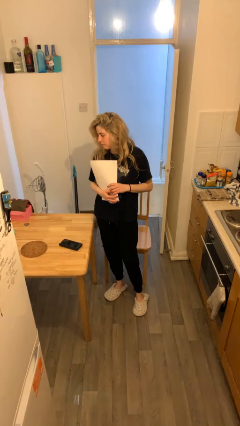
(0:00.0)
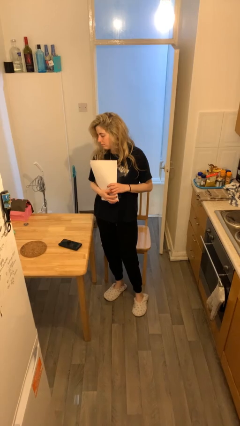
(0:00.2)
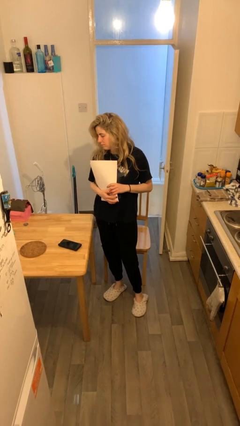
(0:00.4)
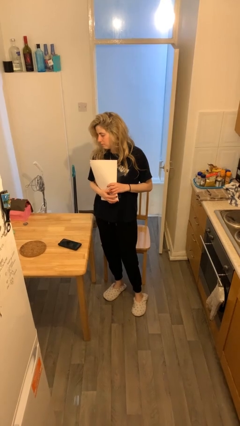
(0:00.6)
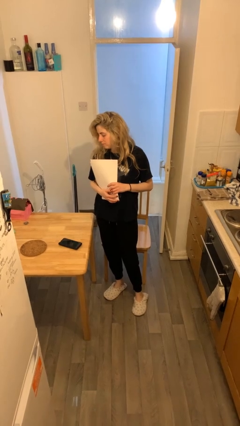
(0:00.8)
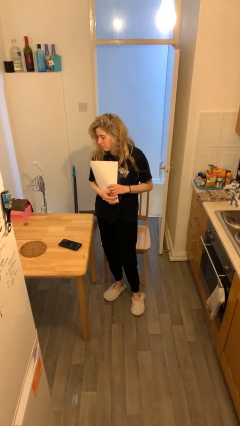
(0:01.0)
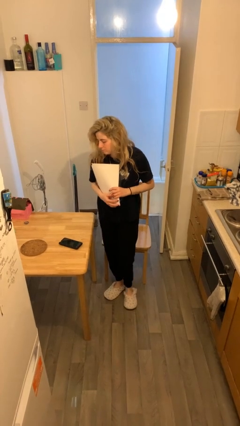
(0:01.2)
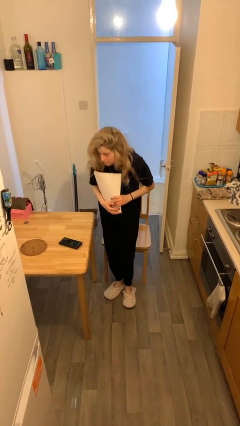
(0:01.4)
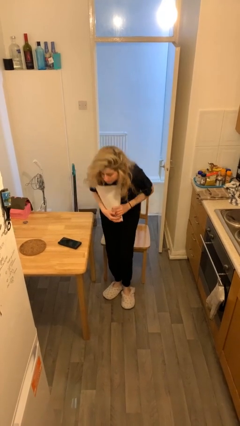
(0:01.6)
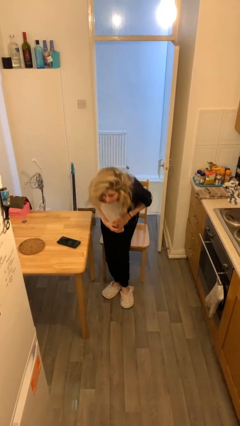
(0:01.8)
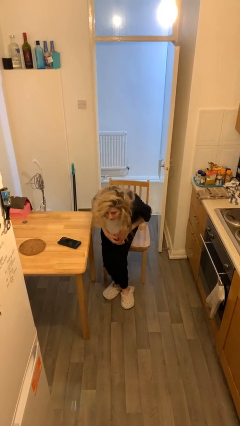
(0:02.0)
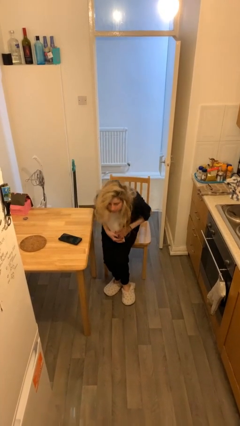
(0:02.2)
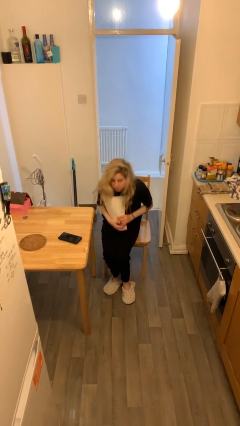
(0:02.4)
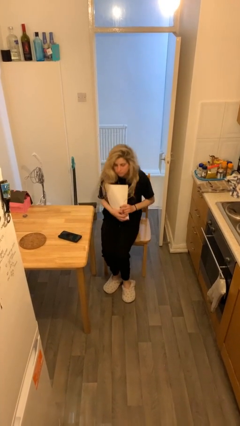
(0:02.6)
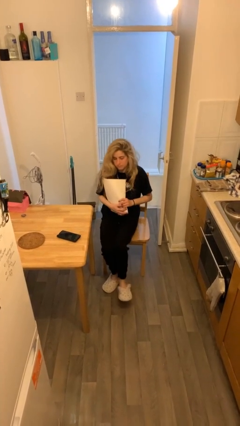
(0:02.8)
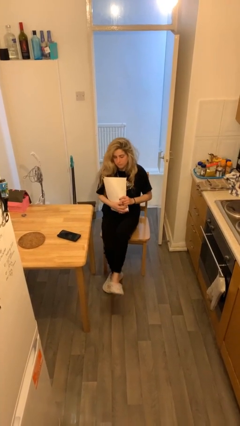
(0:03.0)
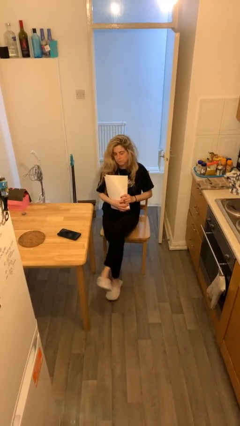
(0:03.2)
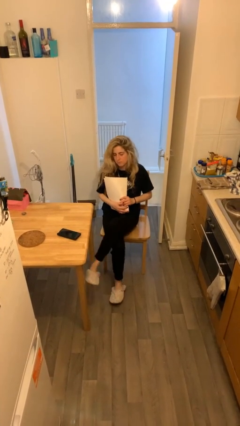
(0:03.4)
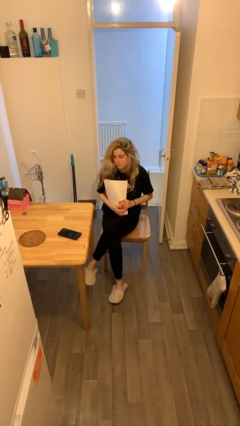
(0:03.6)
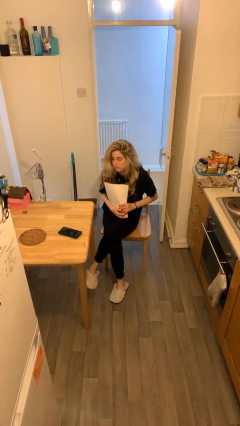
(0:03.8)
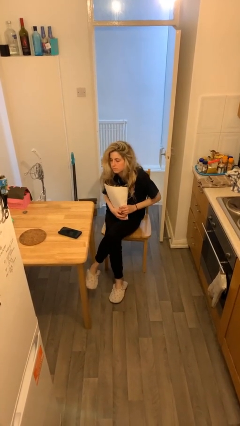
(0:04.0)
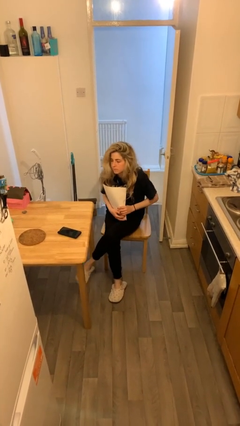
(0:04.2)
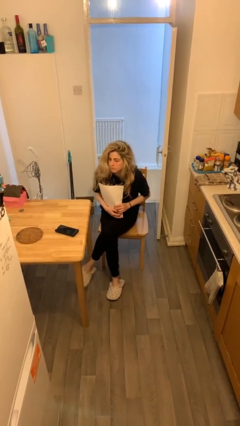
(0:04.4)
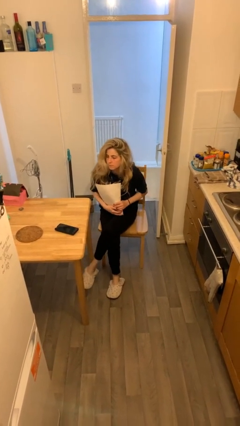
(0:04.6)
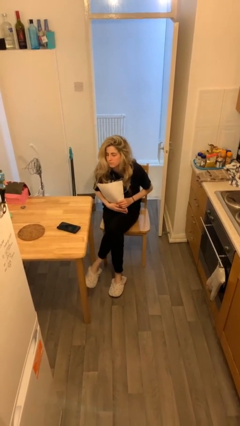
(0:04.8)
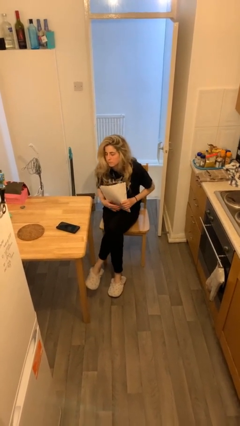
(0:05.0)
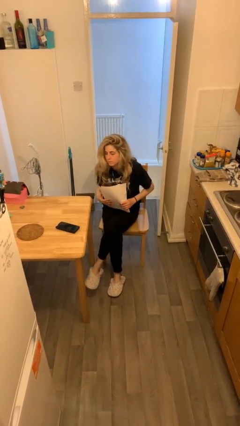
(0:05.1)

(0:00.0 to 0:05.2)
person sits down

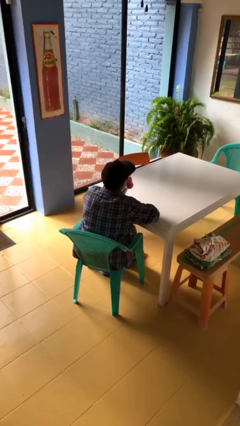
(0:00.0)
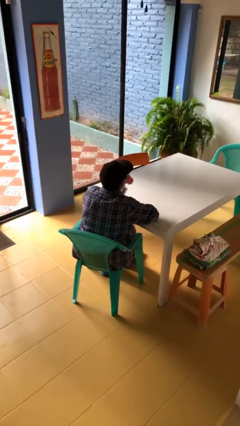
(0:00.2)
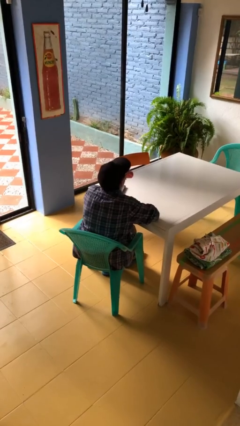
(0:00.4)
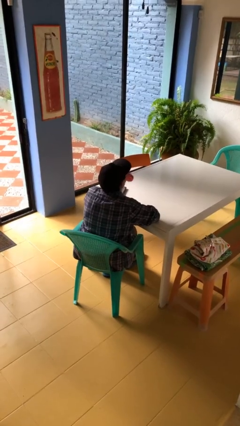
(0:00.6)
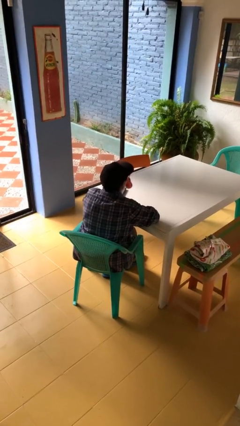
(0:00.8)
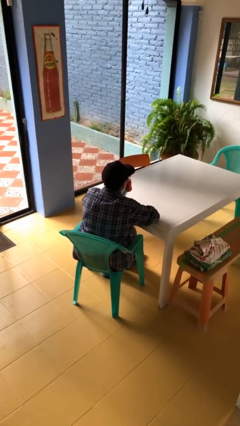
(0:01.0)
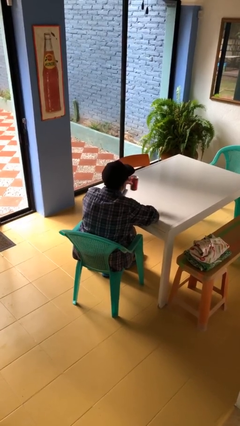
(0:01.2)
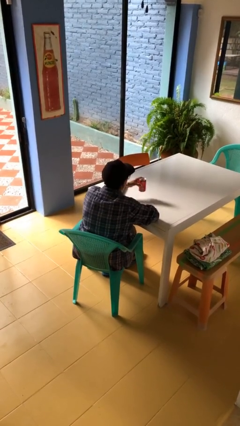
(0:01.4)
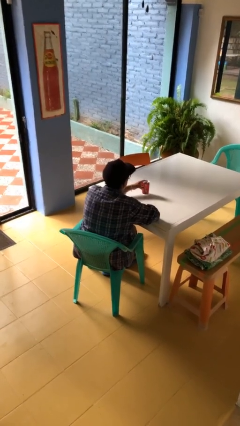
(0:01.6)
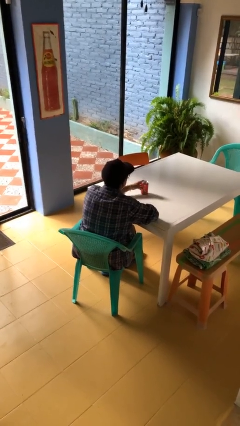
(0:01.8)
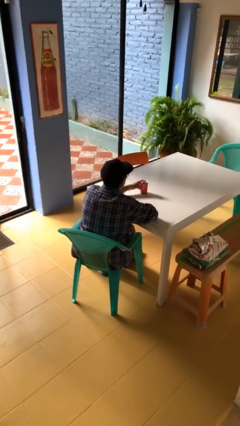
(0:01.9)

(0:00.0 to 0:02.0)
person drinks from beverage can

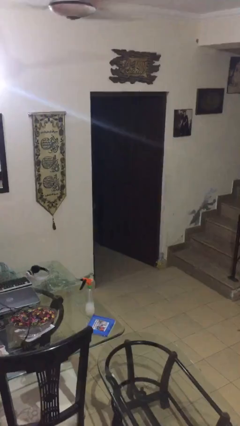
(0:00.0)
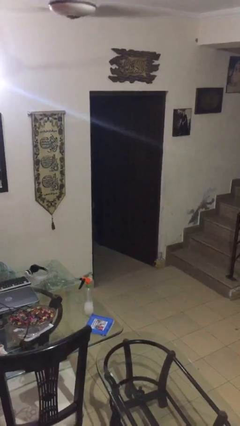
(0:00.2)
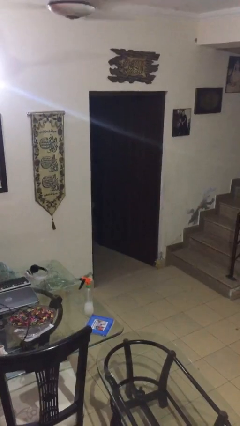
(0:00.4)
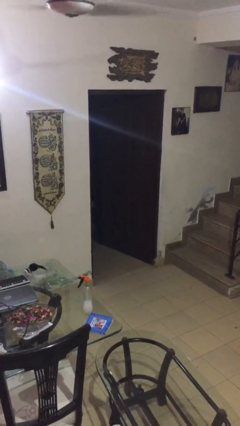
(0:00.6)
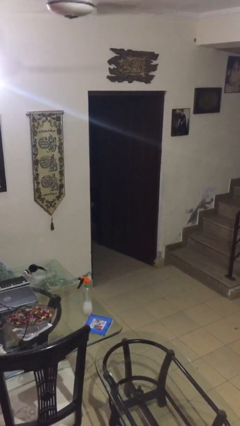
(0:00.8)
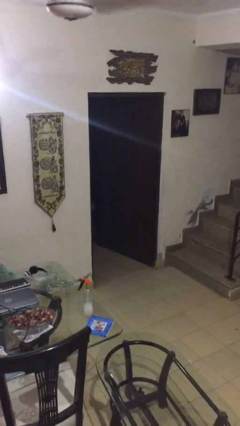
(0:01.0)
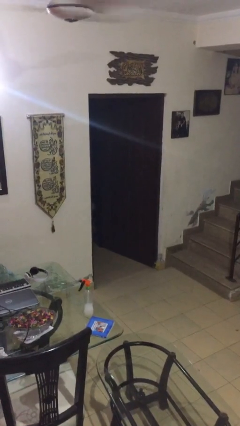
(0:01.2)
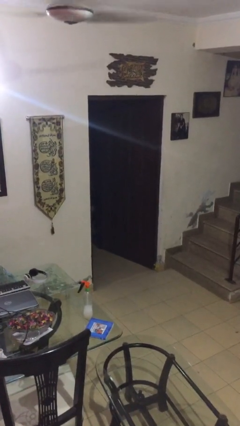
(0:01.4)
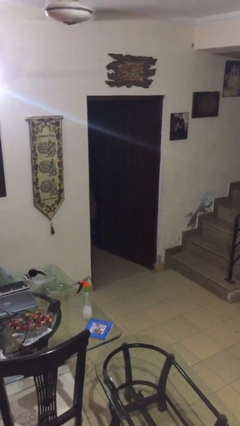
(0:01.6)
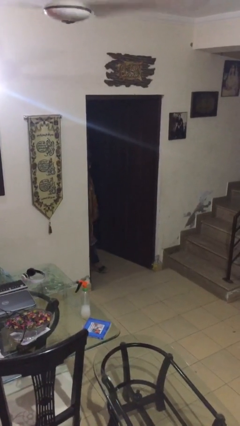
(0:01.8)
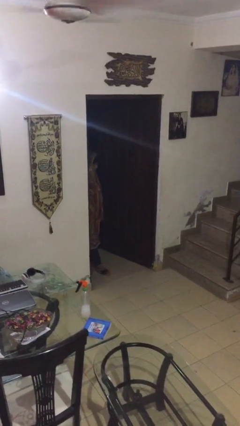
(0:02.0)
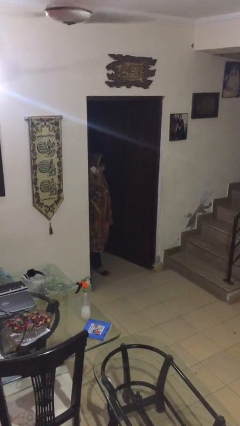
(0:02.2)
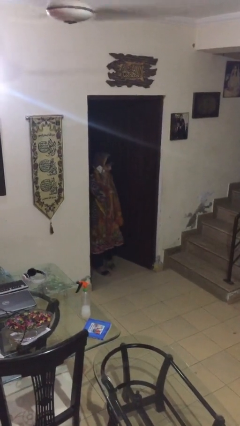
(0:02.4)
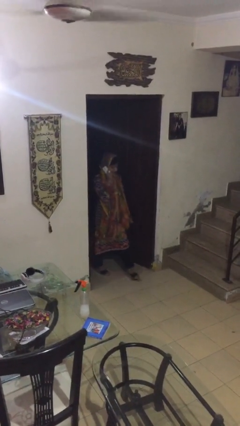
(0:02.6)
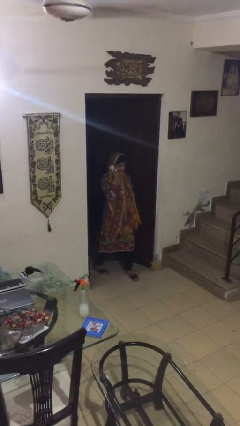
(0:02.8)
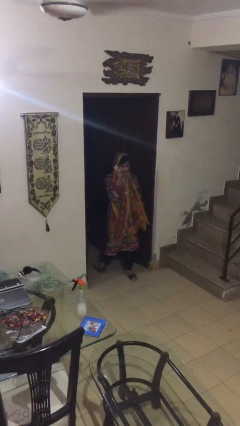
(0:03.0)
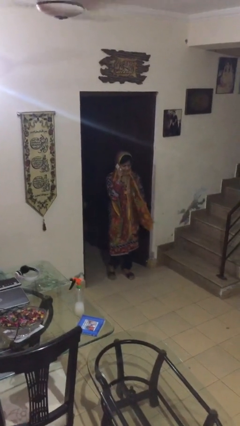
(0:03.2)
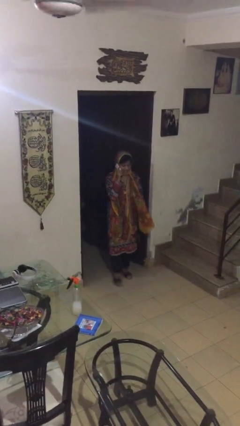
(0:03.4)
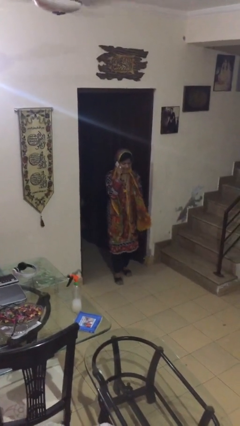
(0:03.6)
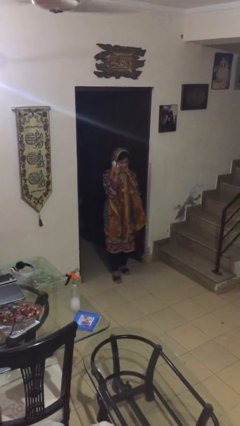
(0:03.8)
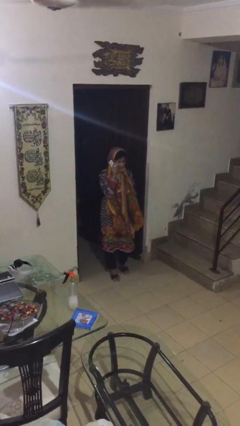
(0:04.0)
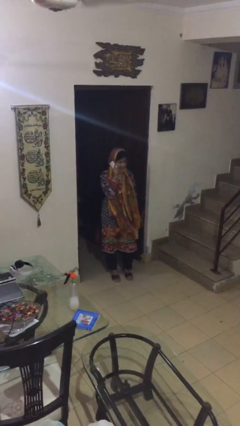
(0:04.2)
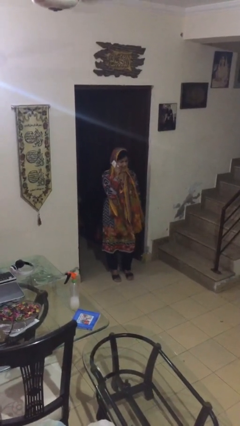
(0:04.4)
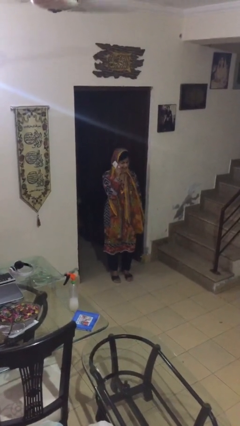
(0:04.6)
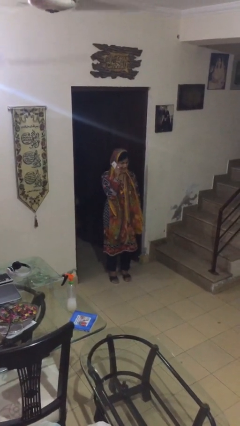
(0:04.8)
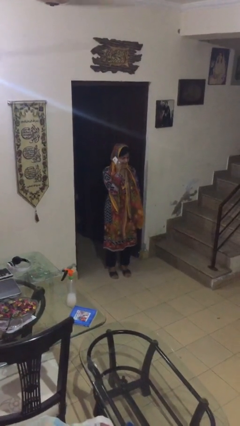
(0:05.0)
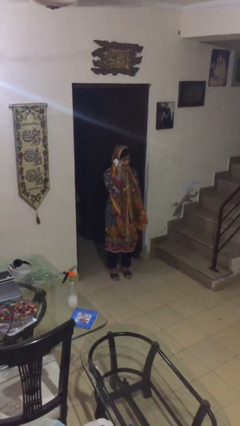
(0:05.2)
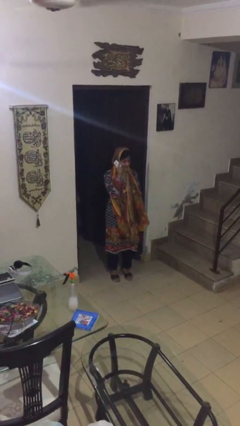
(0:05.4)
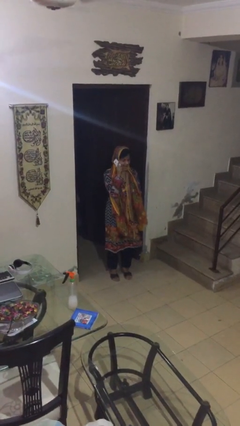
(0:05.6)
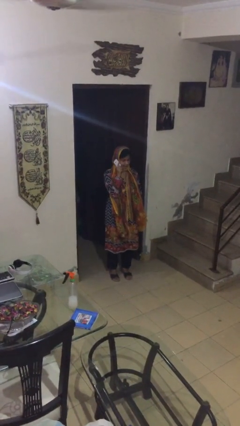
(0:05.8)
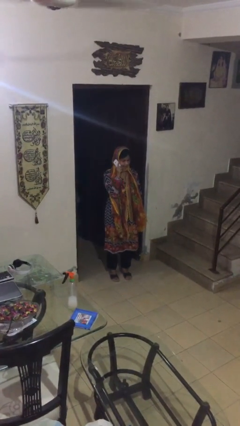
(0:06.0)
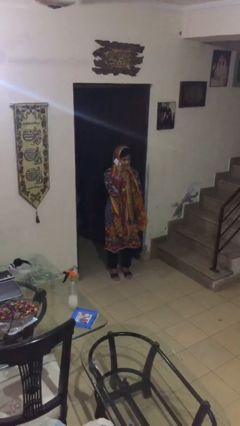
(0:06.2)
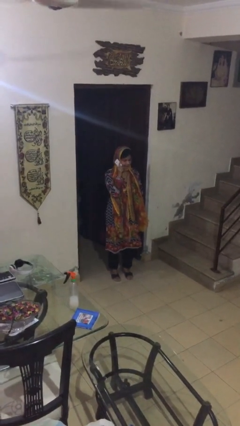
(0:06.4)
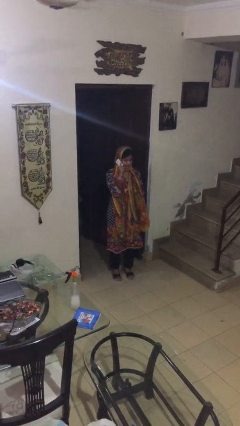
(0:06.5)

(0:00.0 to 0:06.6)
person enters scene through structure

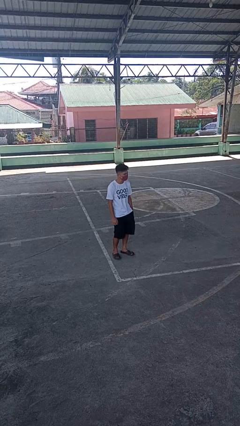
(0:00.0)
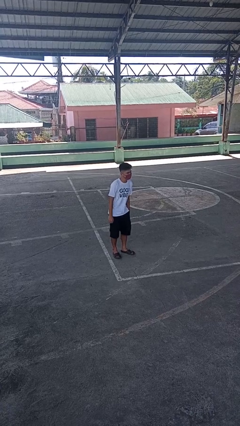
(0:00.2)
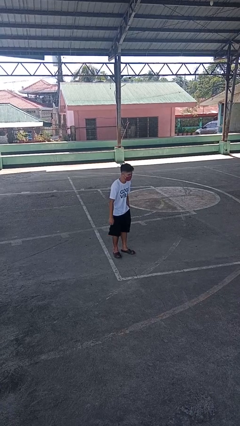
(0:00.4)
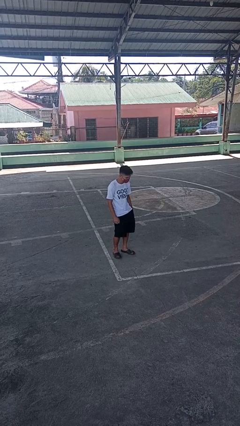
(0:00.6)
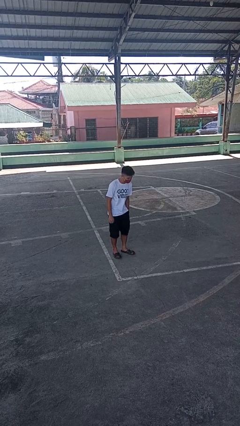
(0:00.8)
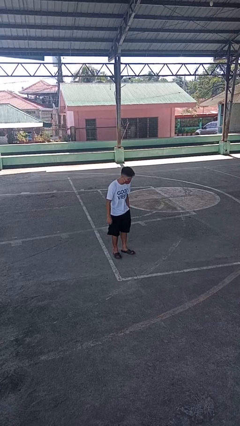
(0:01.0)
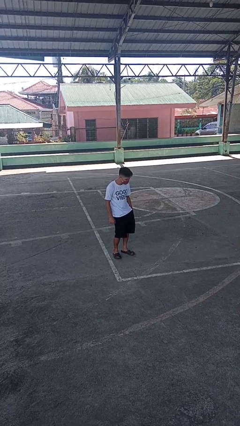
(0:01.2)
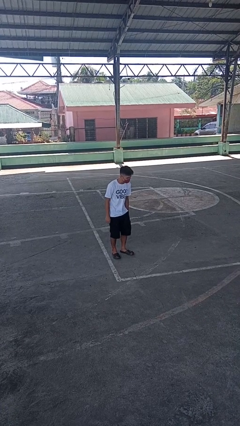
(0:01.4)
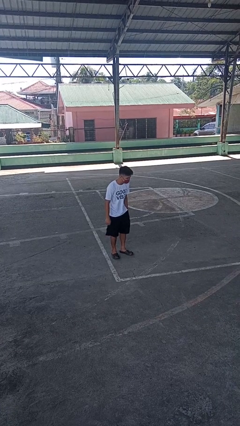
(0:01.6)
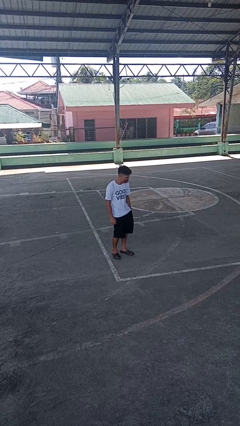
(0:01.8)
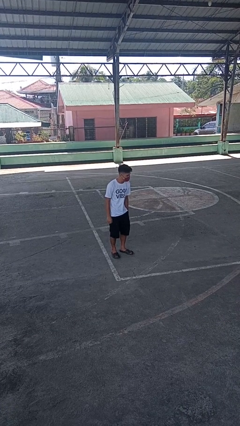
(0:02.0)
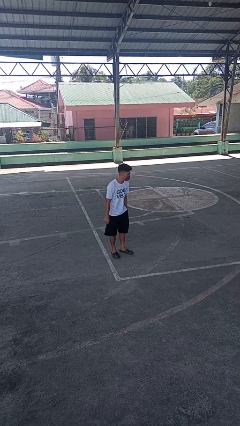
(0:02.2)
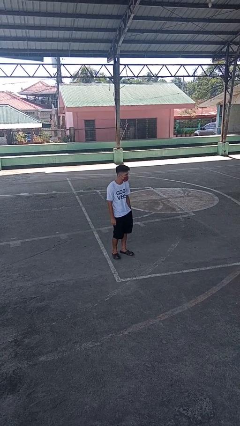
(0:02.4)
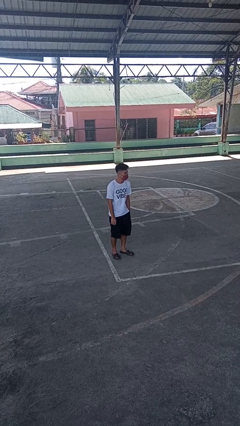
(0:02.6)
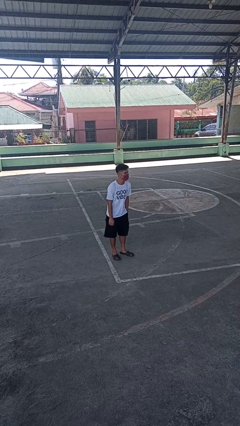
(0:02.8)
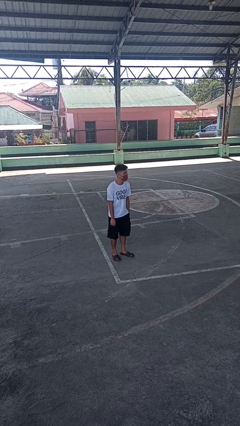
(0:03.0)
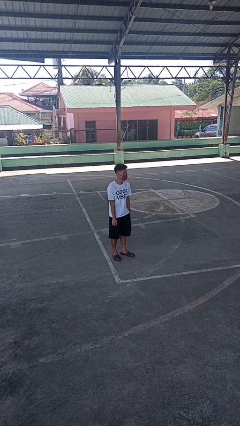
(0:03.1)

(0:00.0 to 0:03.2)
person wiggles hips

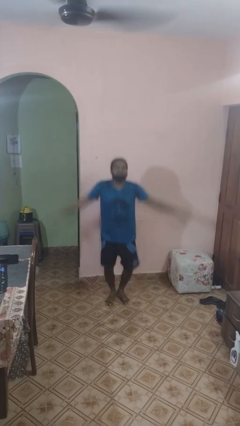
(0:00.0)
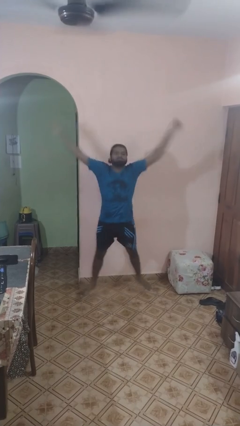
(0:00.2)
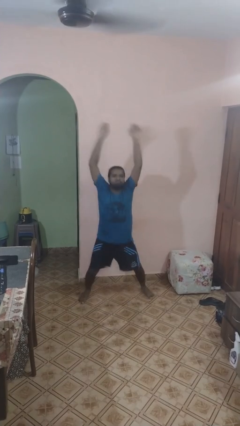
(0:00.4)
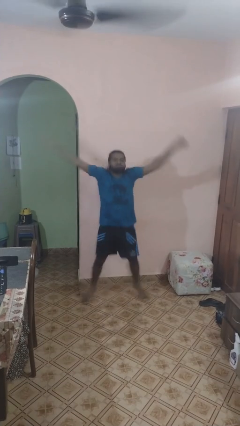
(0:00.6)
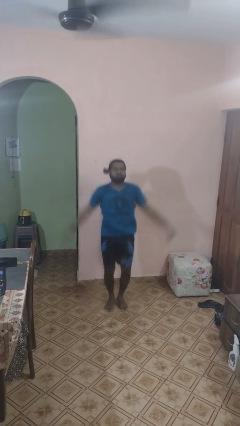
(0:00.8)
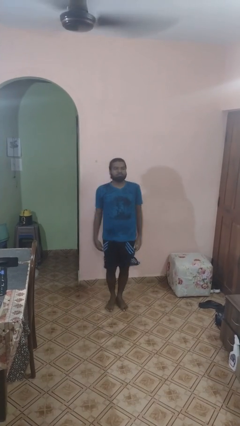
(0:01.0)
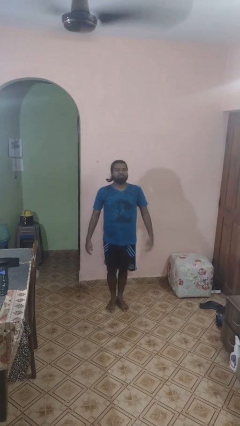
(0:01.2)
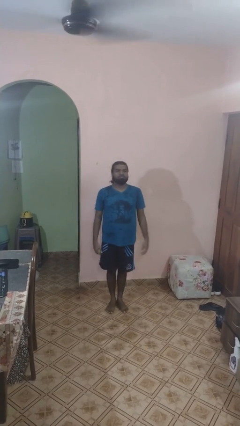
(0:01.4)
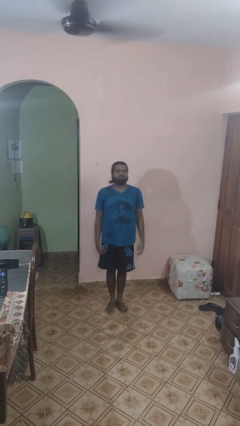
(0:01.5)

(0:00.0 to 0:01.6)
person exercises with jumping jacks
